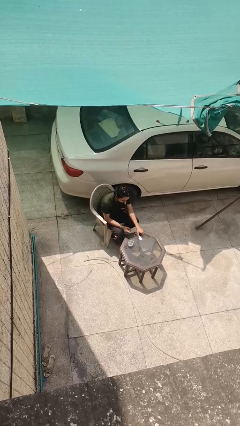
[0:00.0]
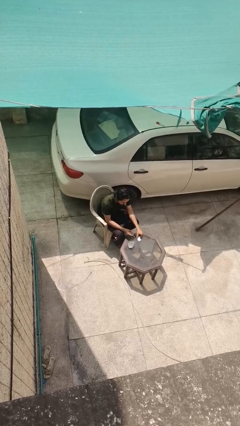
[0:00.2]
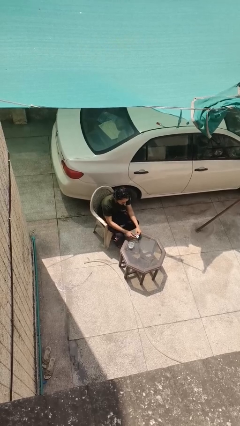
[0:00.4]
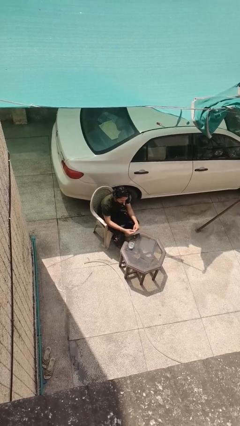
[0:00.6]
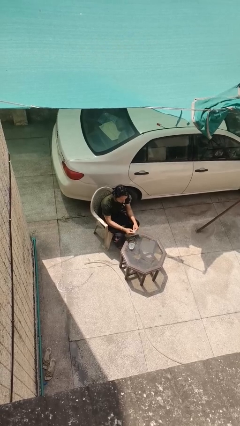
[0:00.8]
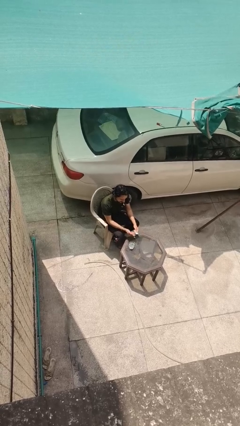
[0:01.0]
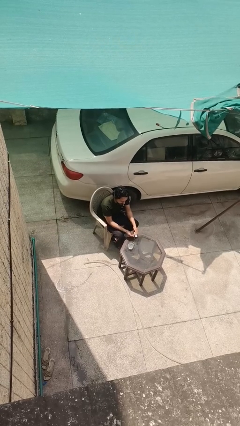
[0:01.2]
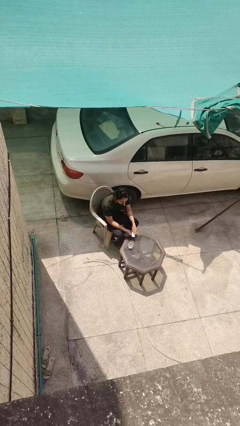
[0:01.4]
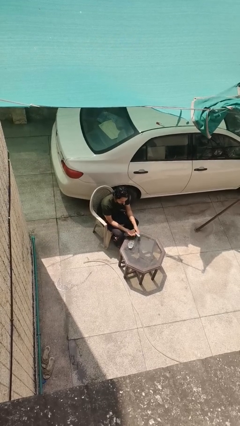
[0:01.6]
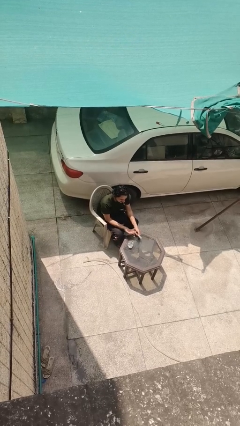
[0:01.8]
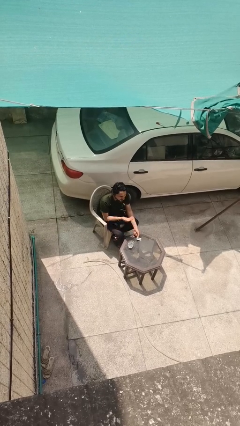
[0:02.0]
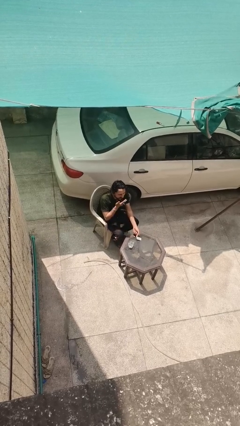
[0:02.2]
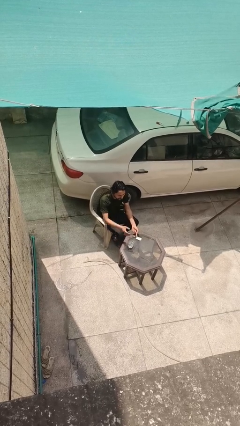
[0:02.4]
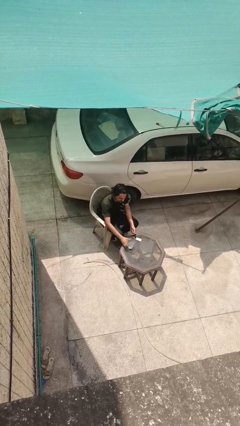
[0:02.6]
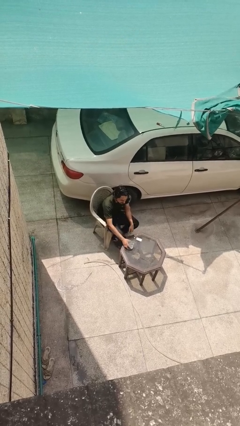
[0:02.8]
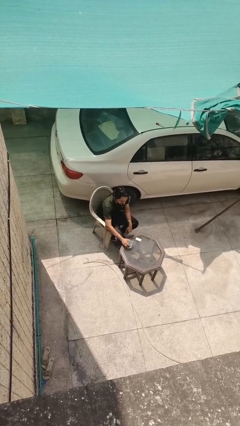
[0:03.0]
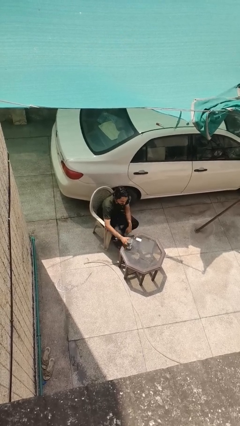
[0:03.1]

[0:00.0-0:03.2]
person takes medicine pills

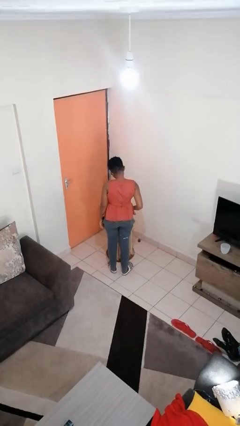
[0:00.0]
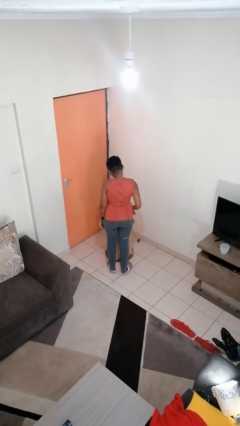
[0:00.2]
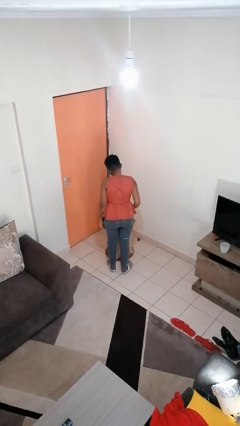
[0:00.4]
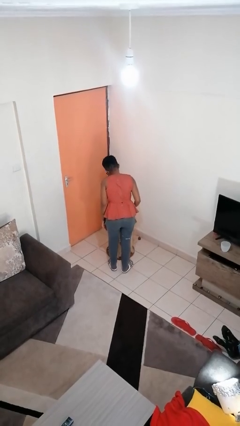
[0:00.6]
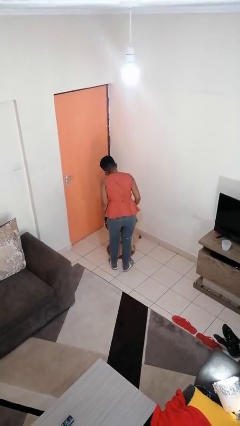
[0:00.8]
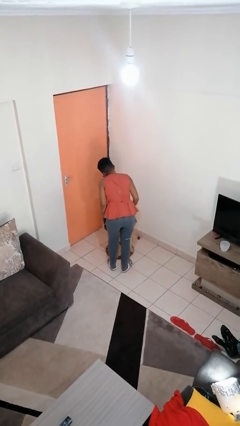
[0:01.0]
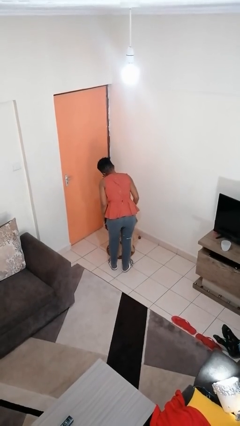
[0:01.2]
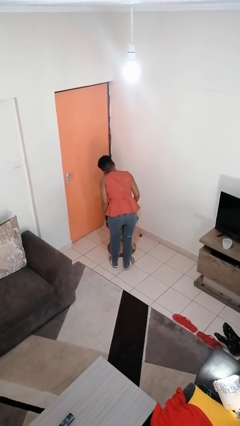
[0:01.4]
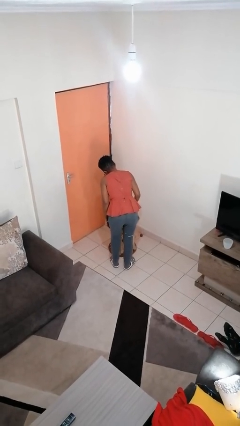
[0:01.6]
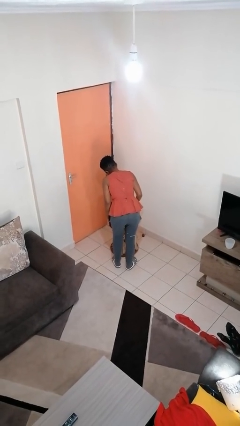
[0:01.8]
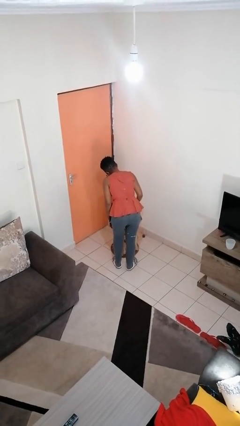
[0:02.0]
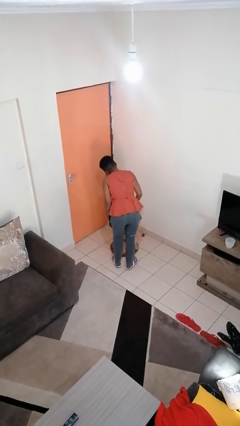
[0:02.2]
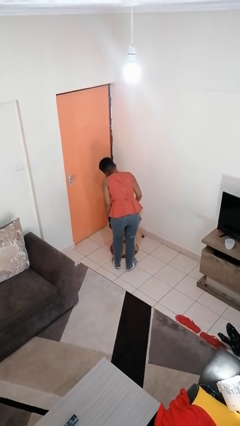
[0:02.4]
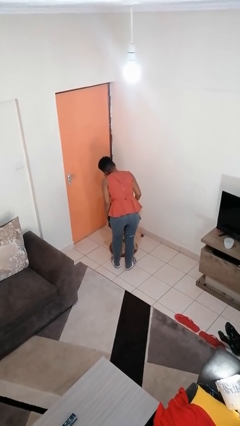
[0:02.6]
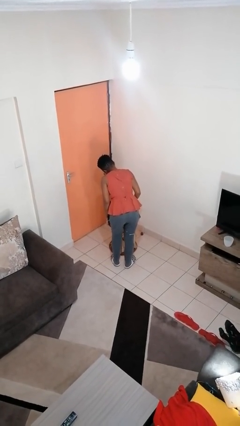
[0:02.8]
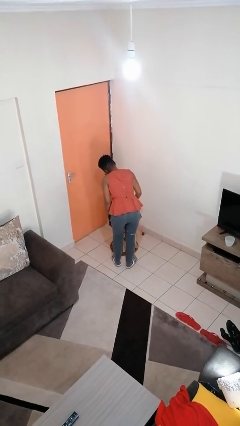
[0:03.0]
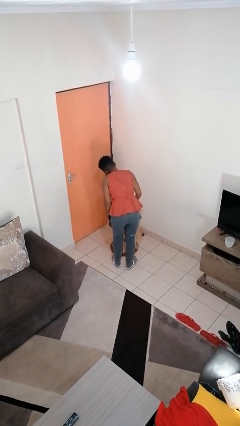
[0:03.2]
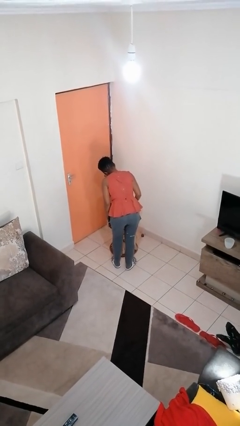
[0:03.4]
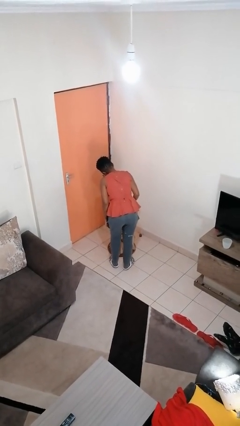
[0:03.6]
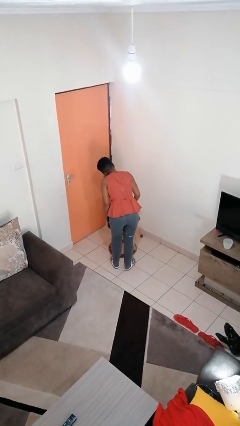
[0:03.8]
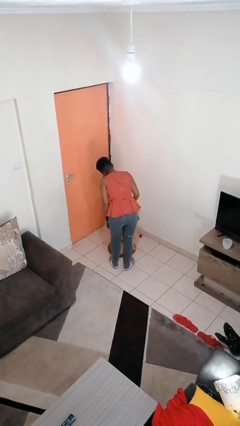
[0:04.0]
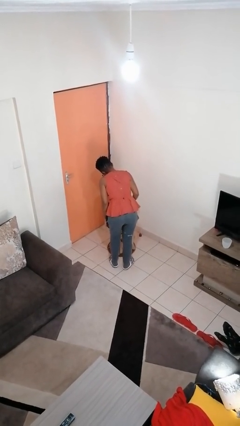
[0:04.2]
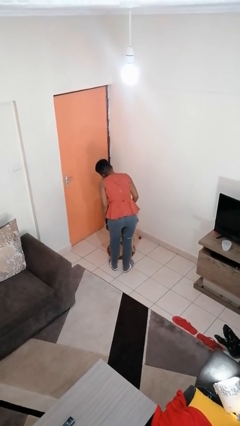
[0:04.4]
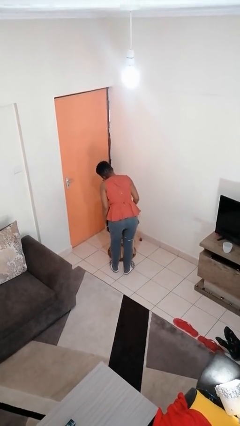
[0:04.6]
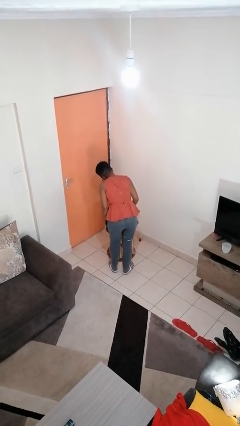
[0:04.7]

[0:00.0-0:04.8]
person pours coffee into mug

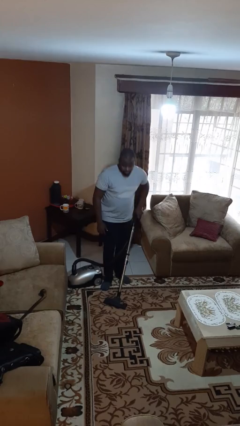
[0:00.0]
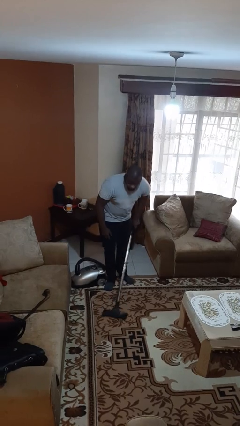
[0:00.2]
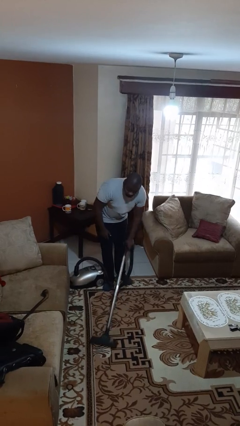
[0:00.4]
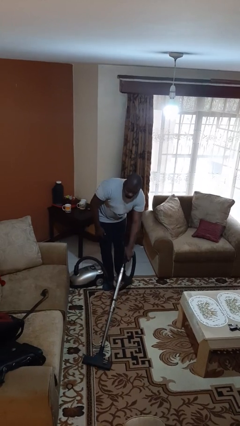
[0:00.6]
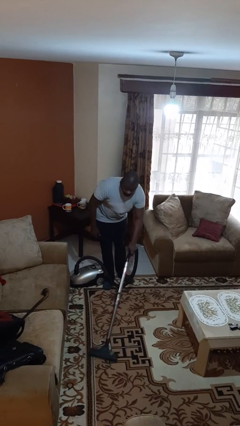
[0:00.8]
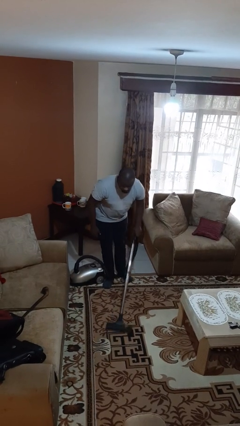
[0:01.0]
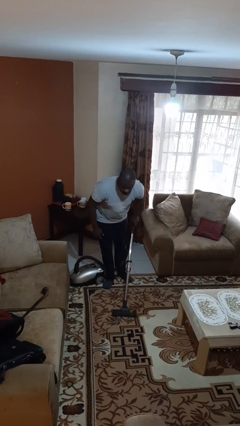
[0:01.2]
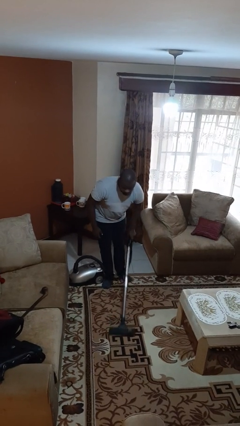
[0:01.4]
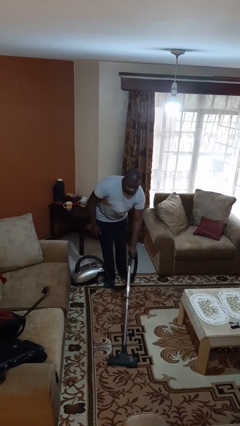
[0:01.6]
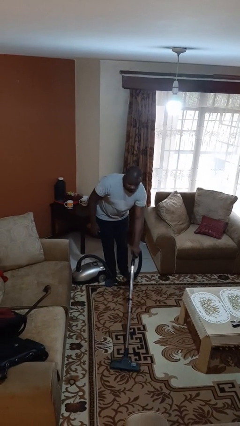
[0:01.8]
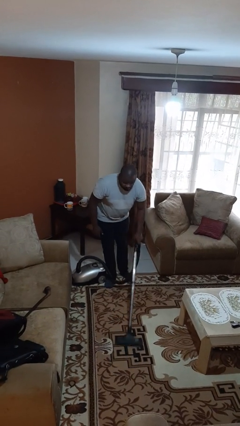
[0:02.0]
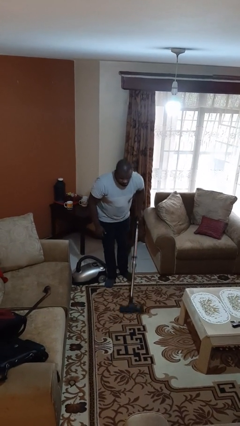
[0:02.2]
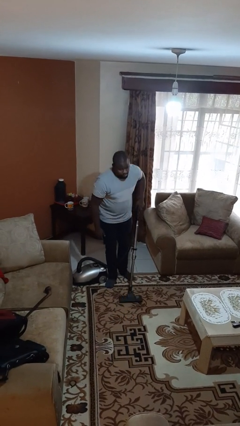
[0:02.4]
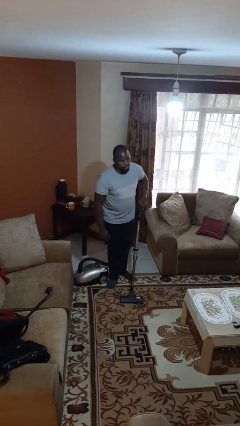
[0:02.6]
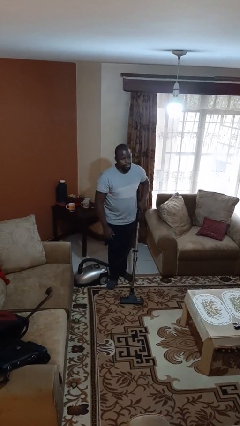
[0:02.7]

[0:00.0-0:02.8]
person vacuums carpet

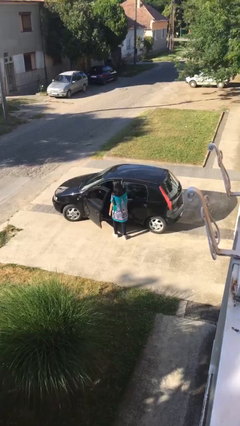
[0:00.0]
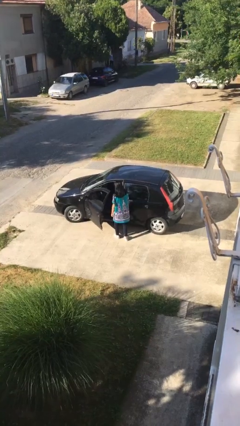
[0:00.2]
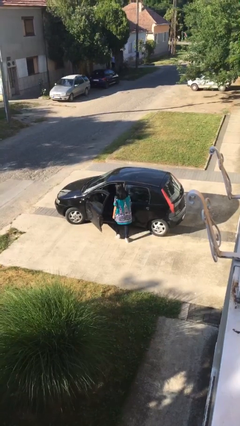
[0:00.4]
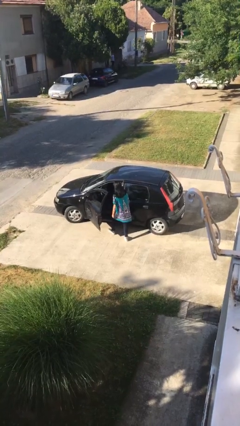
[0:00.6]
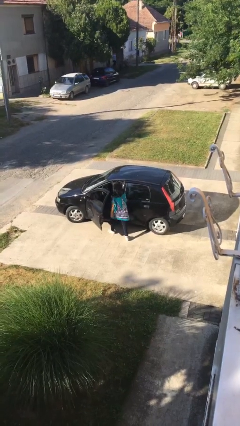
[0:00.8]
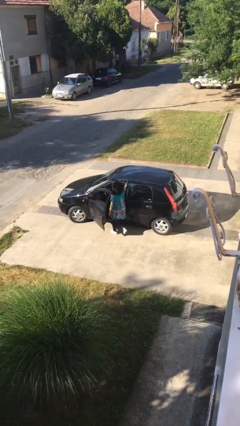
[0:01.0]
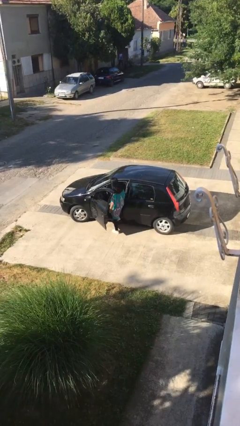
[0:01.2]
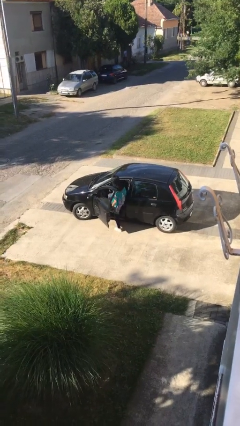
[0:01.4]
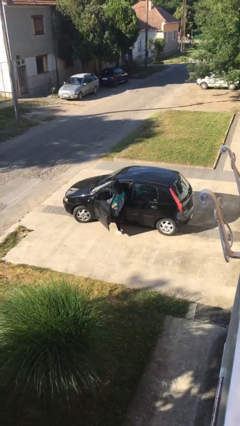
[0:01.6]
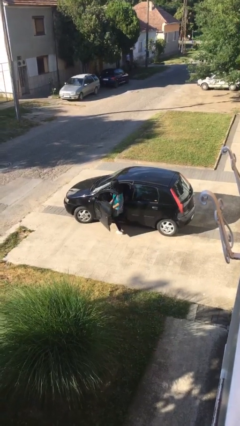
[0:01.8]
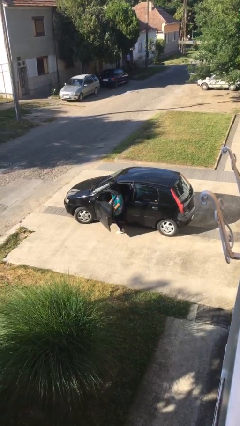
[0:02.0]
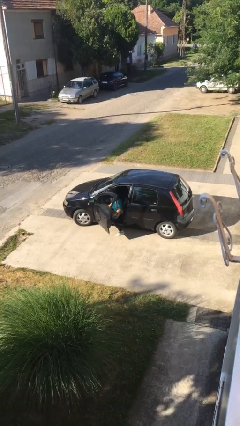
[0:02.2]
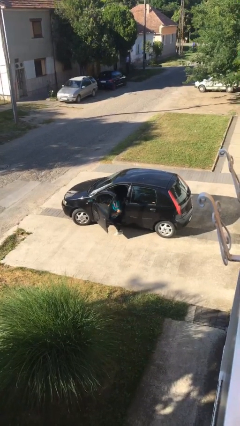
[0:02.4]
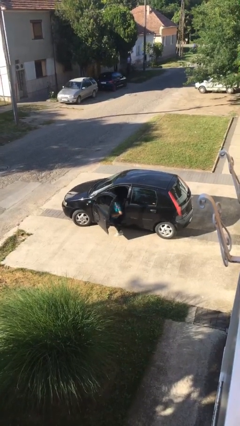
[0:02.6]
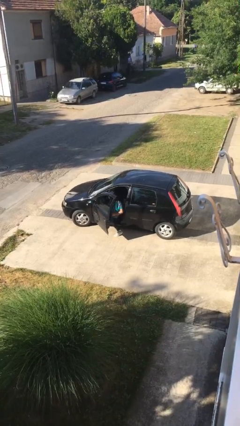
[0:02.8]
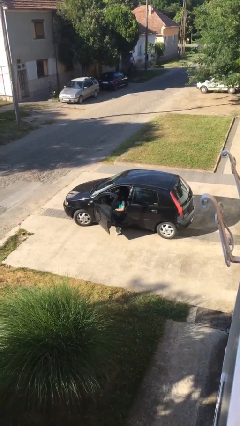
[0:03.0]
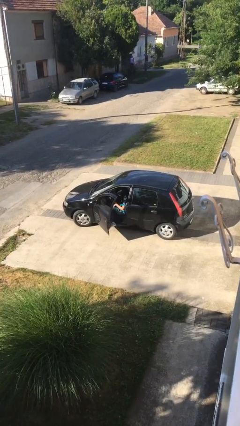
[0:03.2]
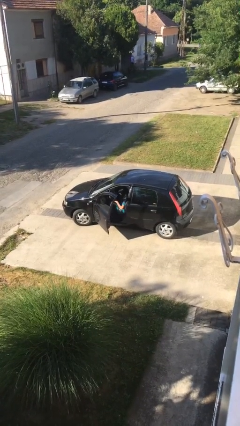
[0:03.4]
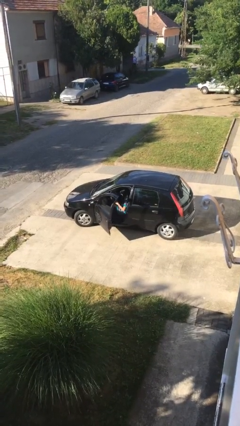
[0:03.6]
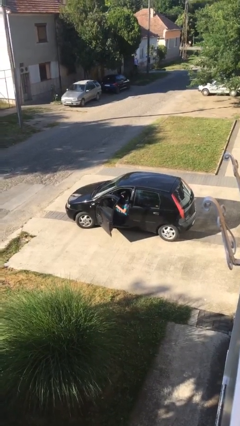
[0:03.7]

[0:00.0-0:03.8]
person enters car

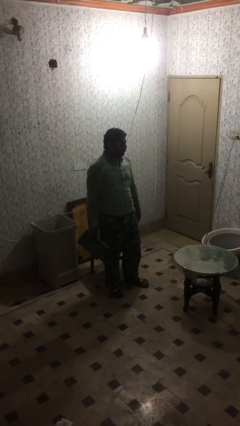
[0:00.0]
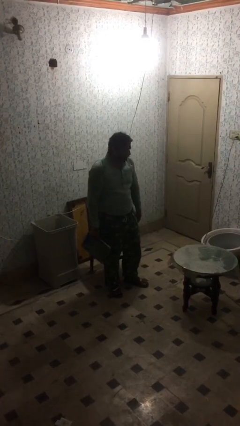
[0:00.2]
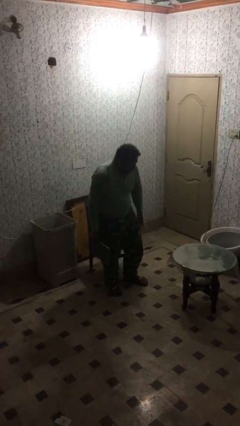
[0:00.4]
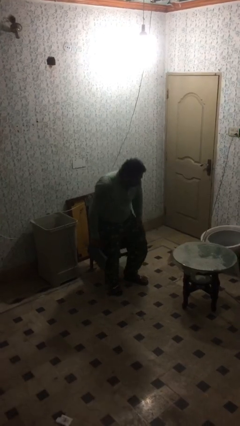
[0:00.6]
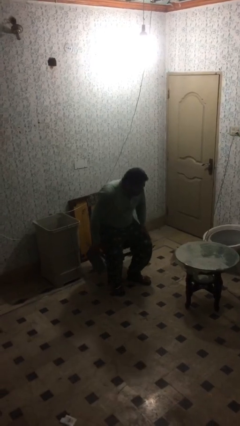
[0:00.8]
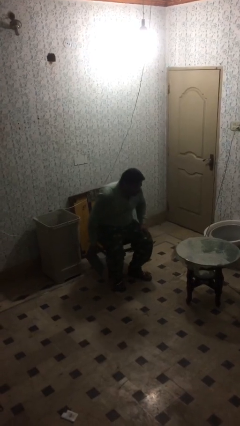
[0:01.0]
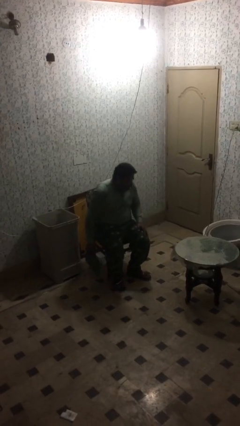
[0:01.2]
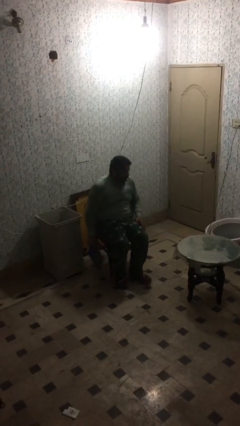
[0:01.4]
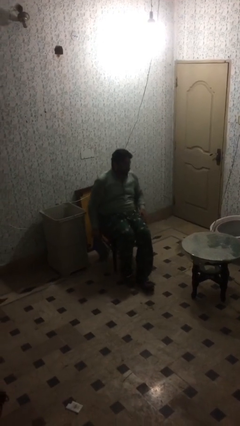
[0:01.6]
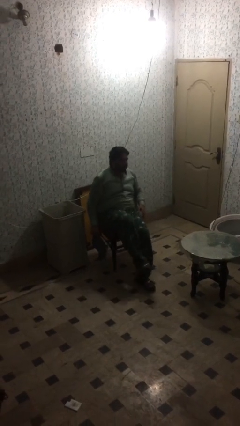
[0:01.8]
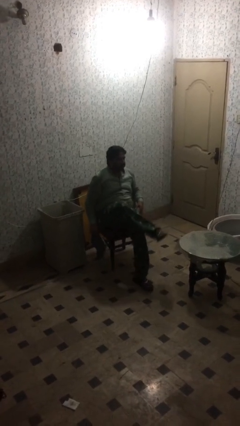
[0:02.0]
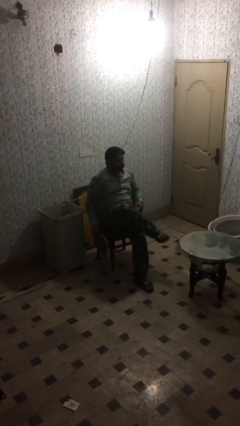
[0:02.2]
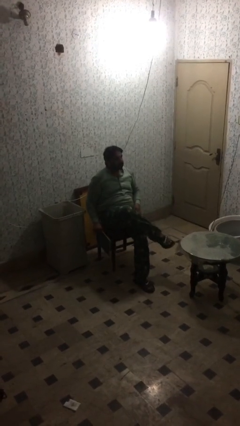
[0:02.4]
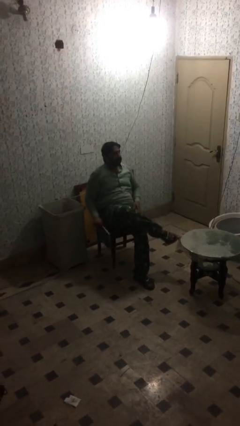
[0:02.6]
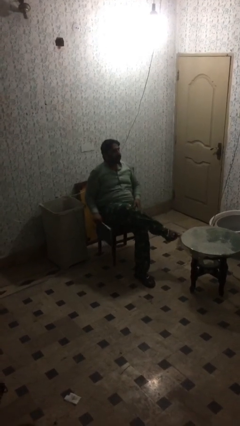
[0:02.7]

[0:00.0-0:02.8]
person sits down
